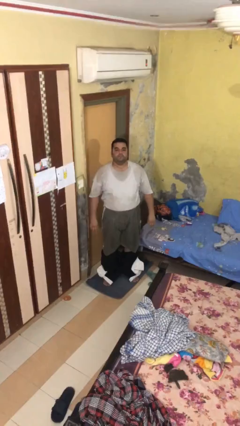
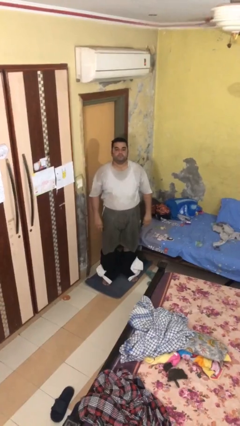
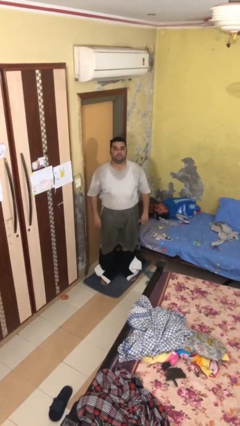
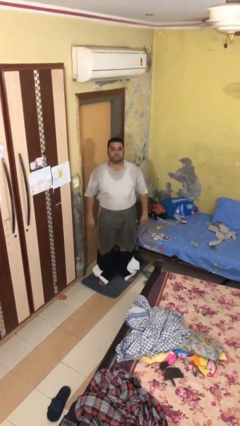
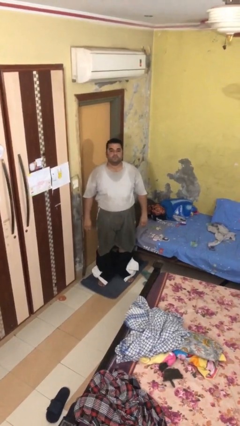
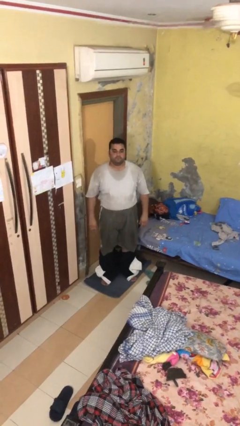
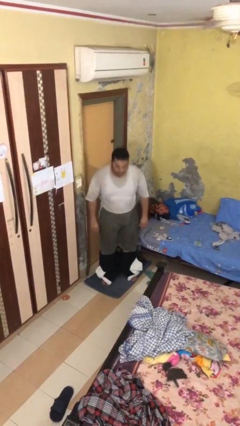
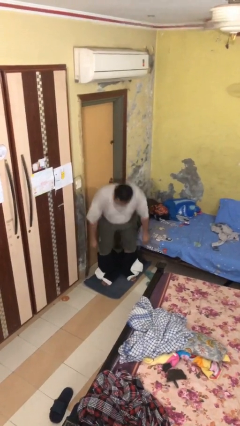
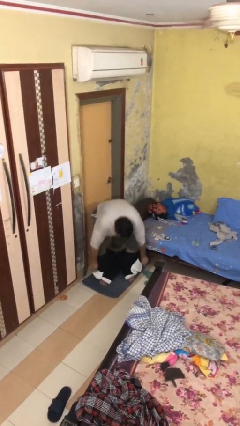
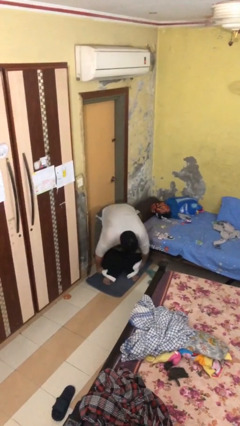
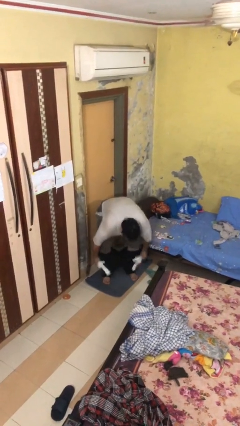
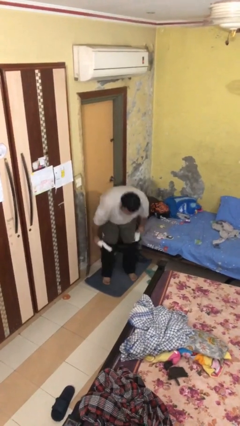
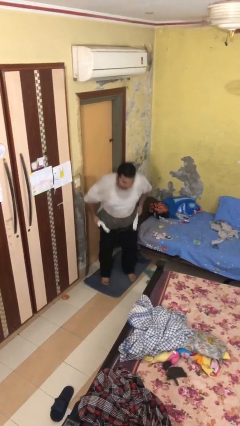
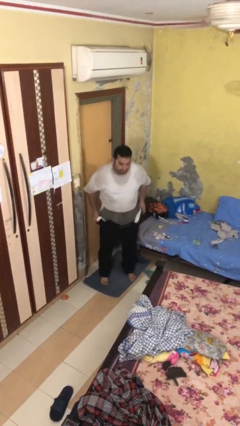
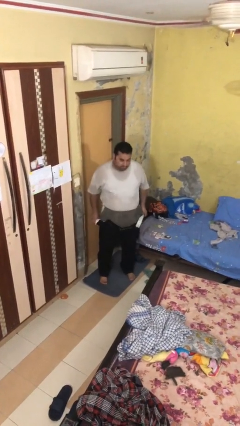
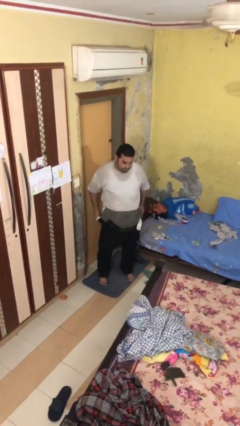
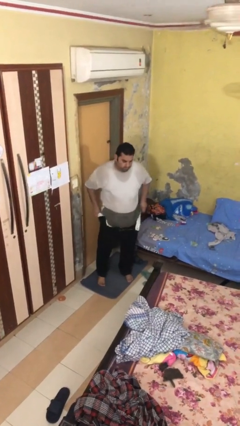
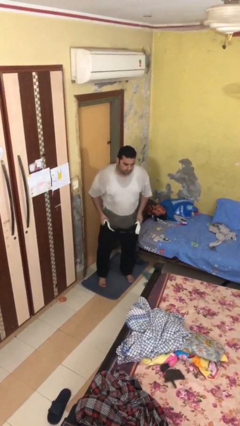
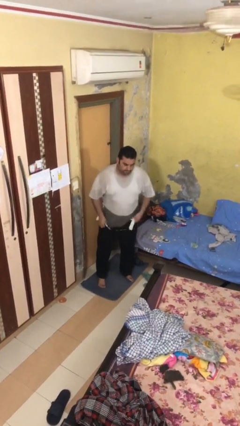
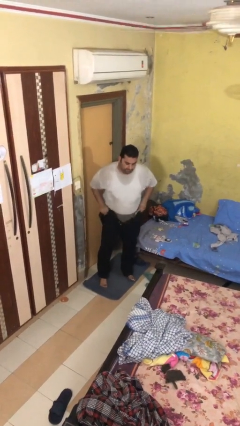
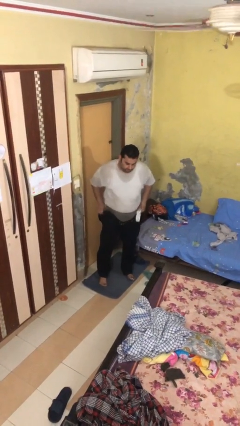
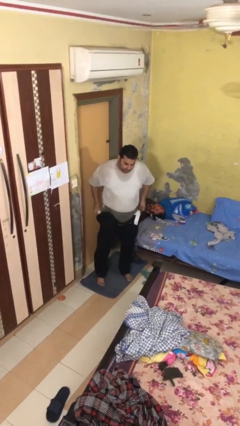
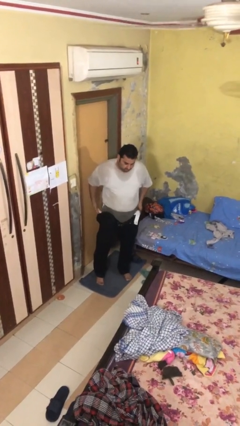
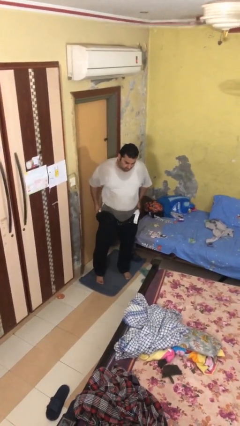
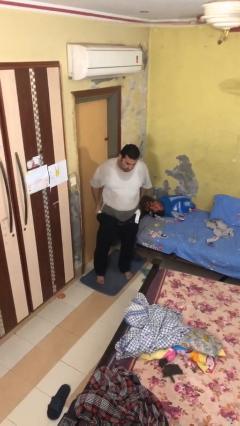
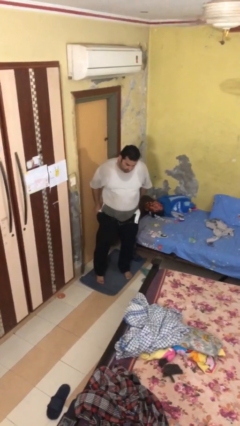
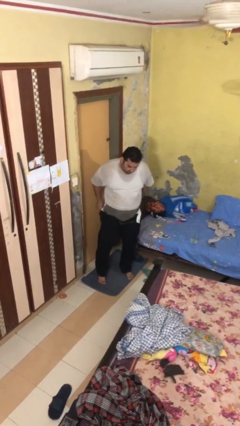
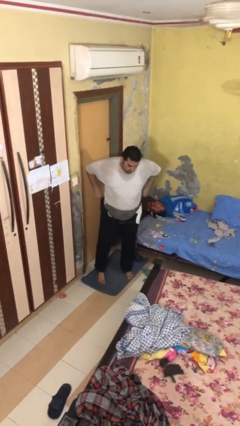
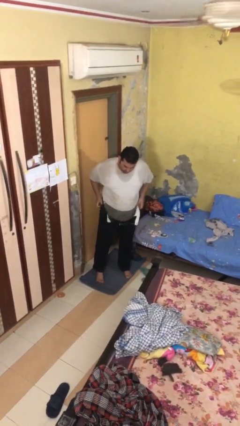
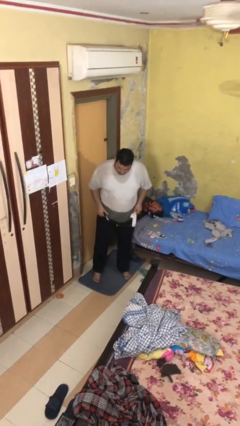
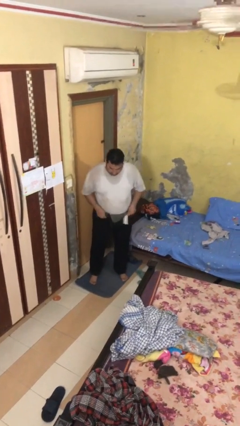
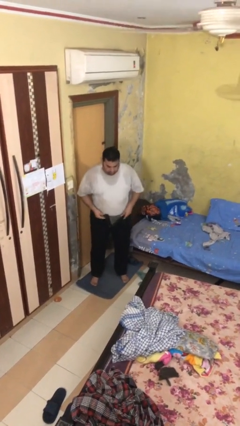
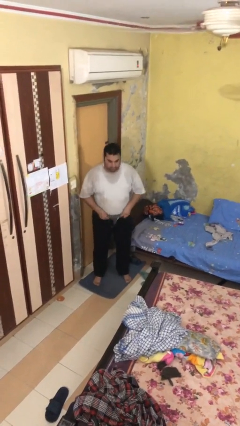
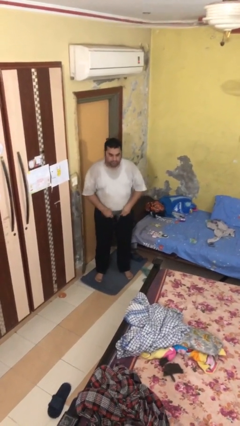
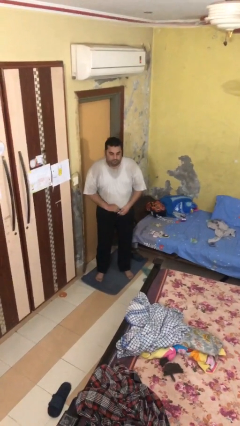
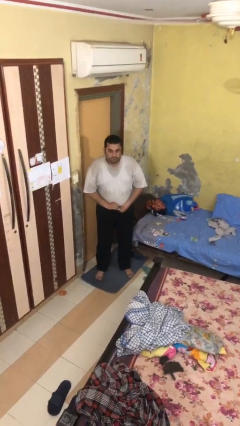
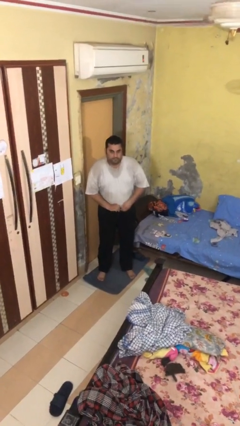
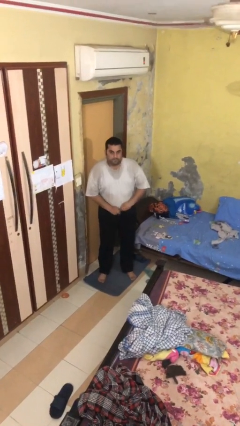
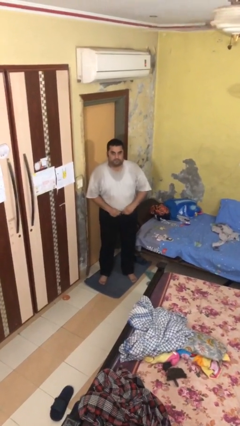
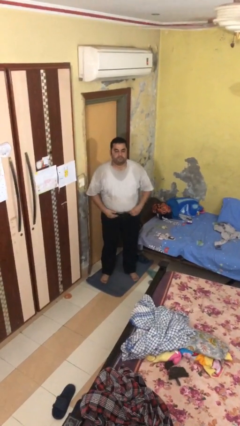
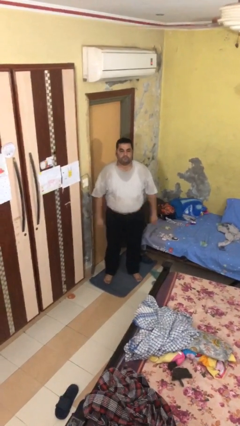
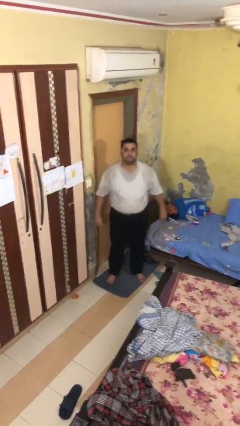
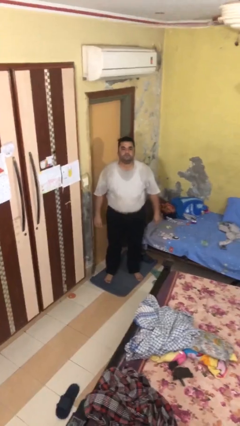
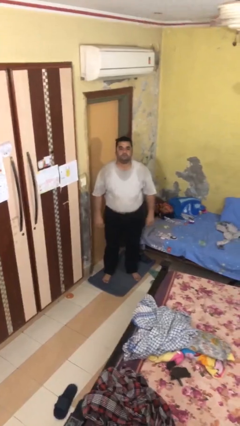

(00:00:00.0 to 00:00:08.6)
person puts on pants

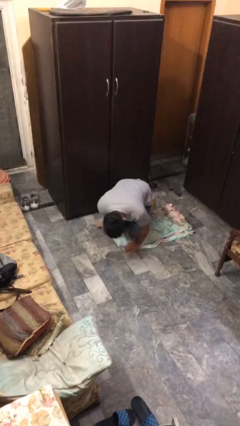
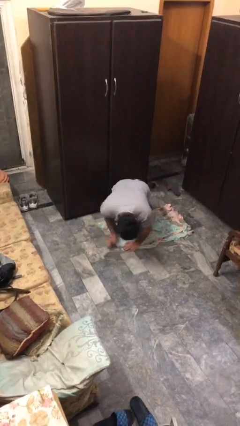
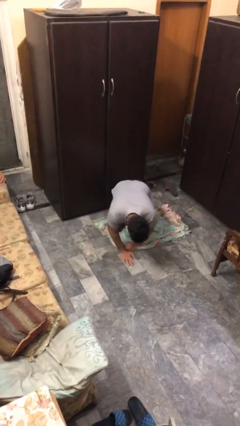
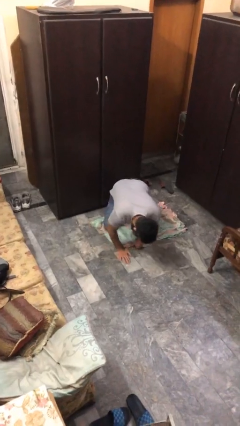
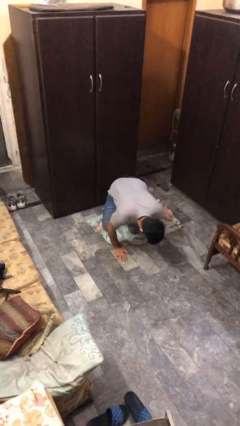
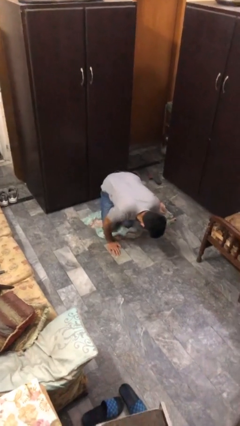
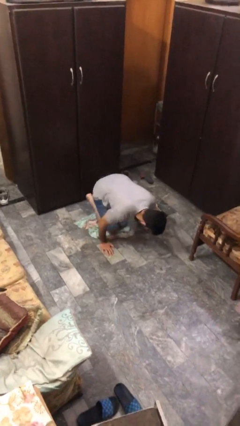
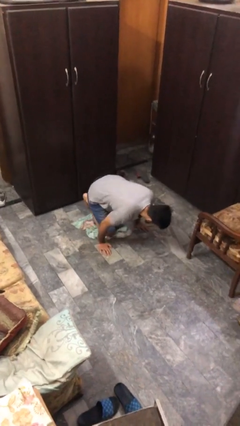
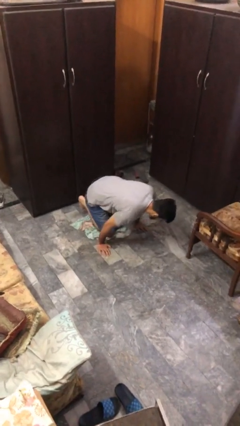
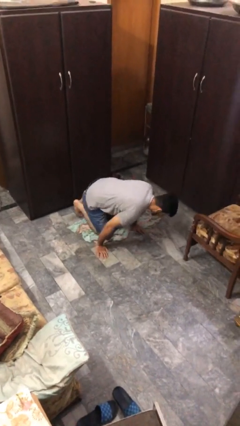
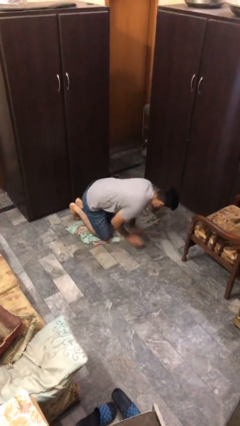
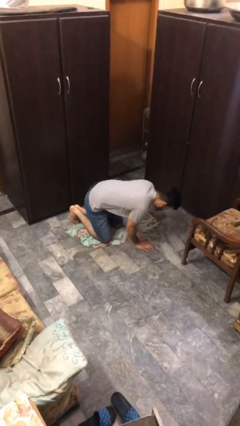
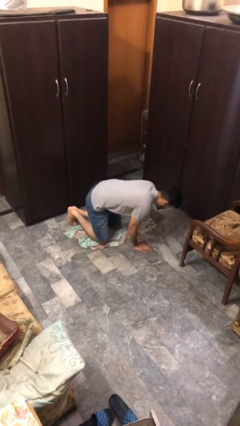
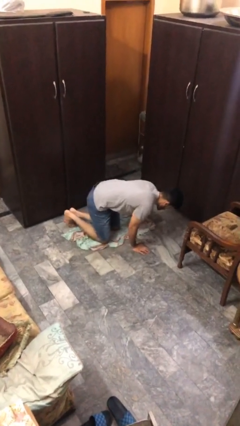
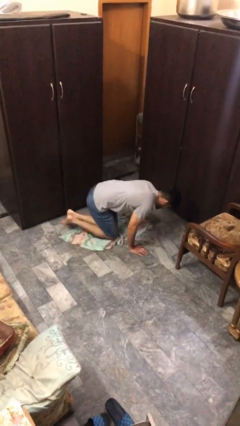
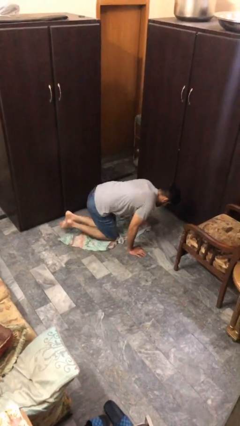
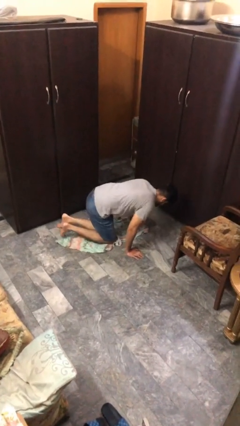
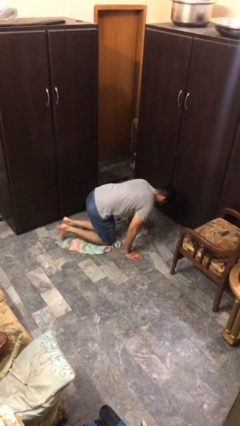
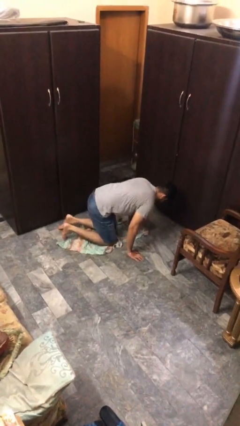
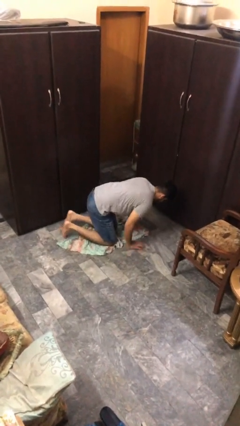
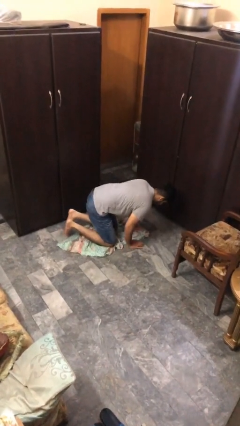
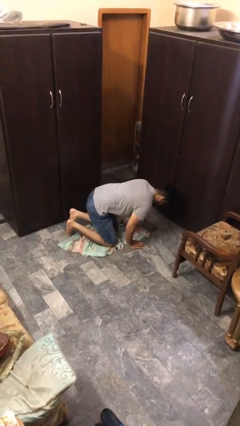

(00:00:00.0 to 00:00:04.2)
person crawls

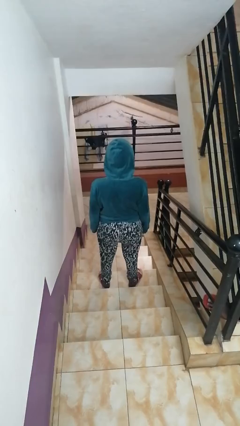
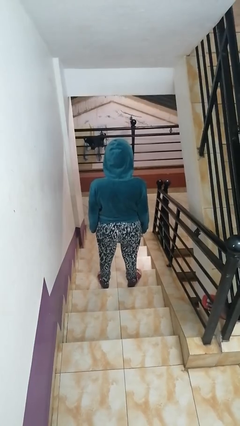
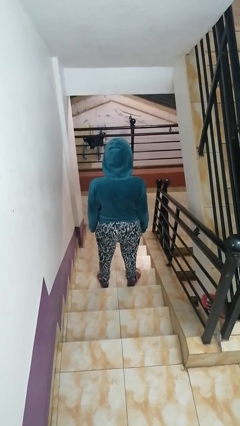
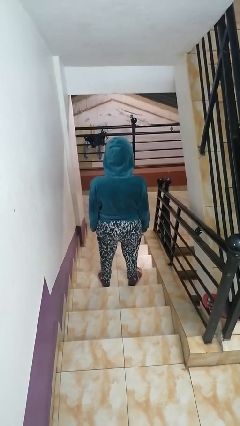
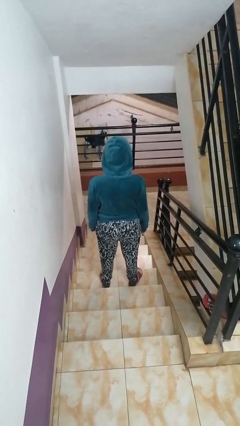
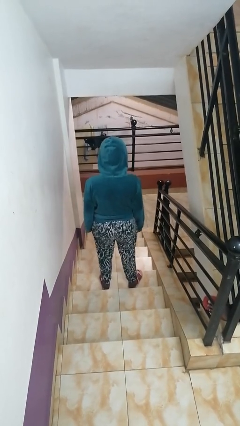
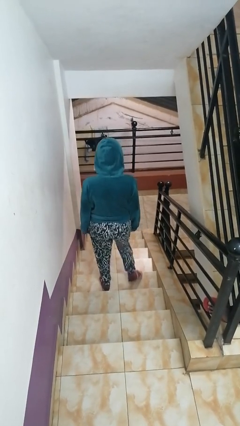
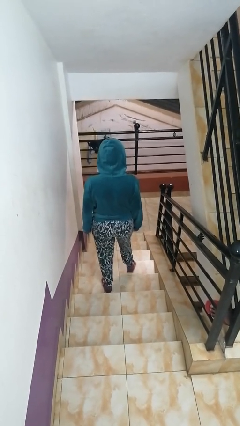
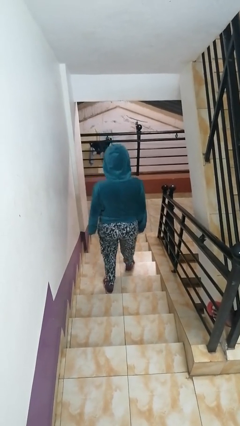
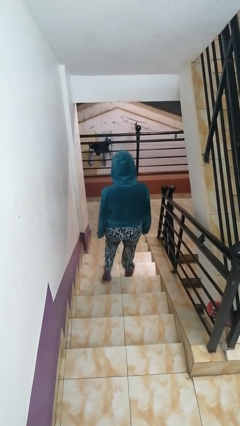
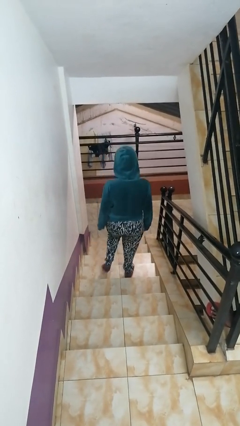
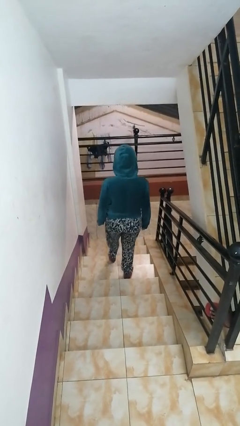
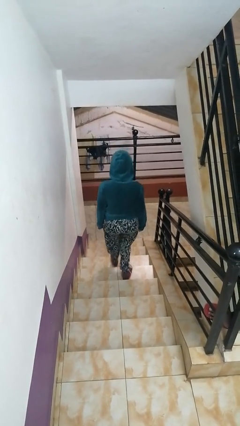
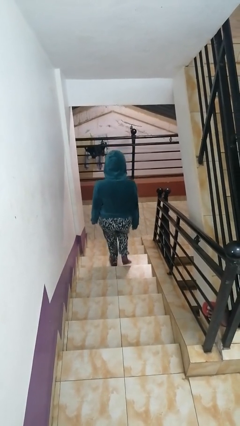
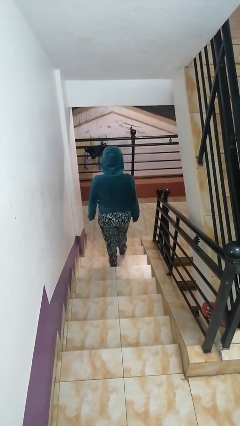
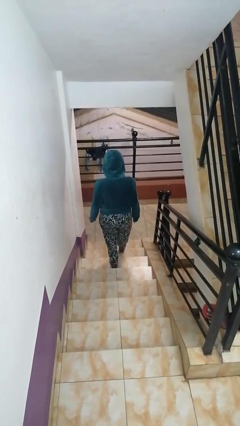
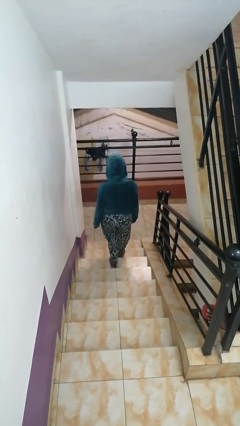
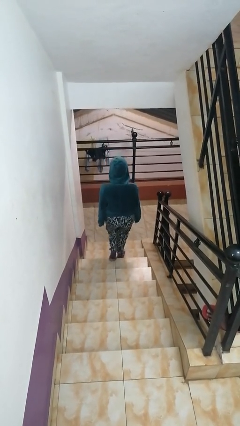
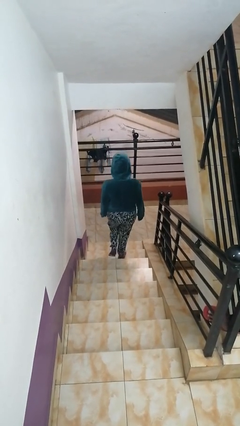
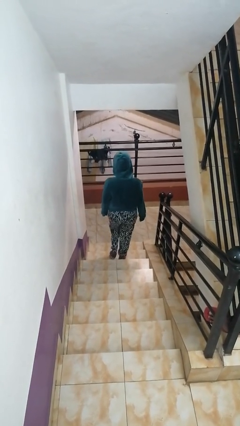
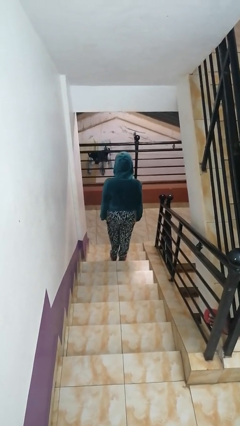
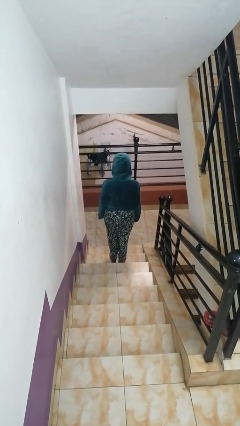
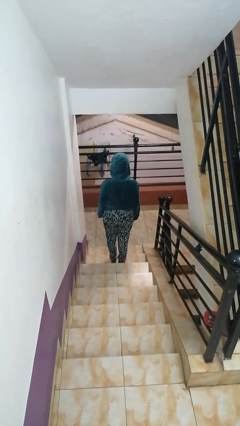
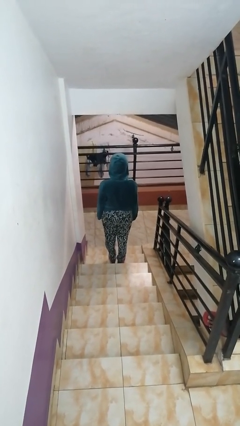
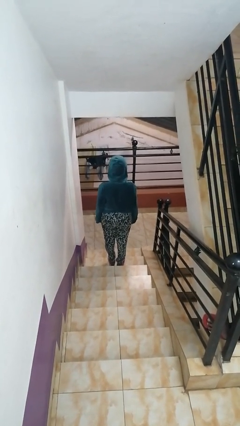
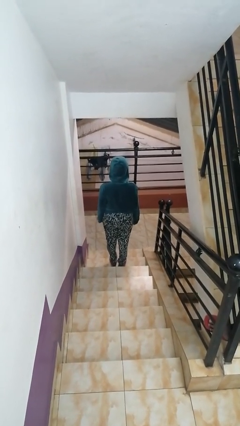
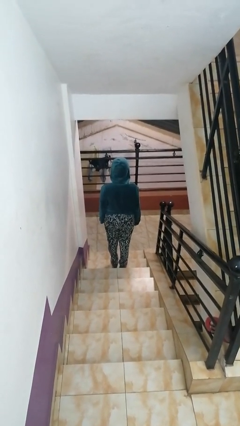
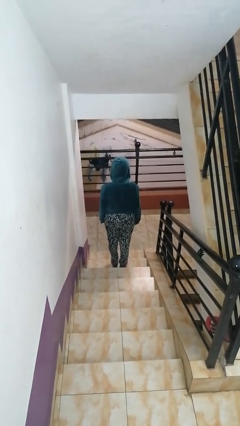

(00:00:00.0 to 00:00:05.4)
person climbs down stairs
